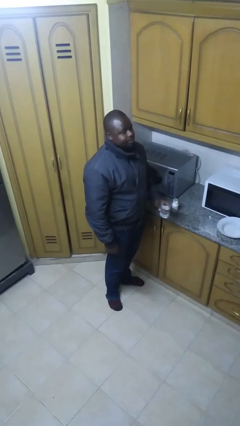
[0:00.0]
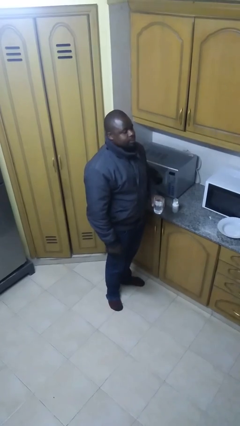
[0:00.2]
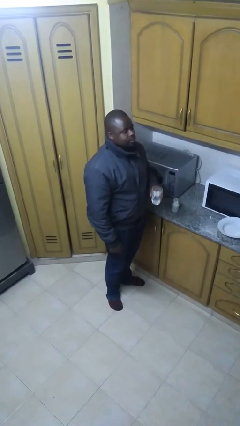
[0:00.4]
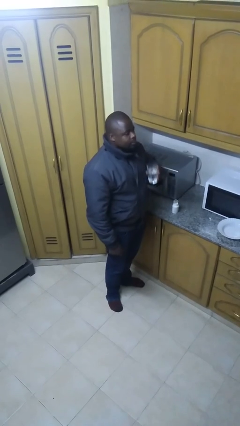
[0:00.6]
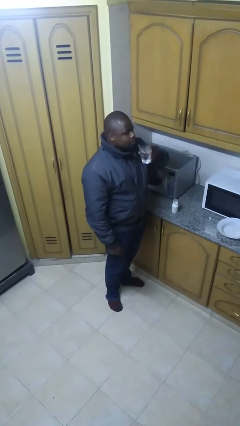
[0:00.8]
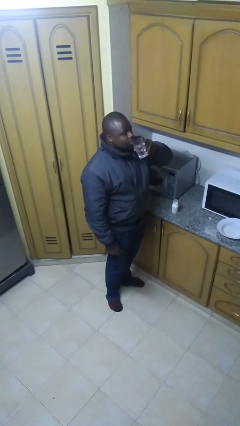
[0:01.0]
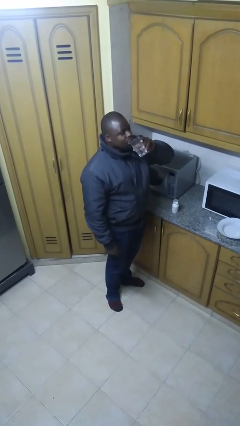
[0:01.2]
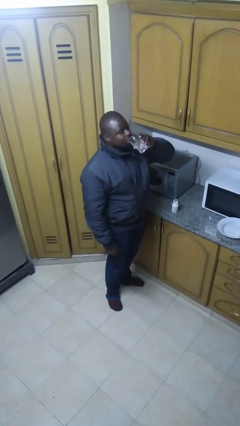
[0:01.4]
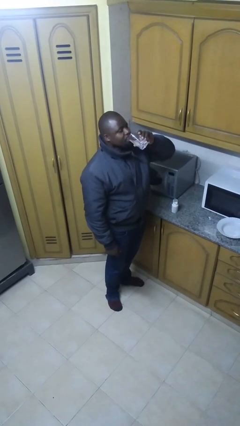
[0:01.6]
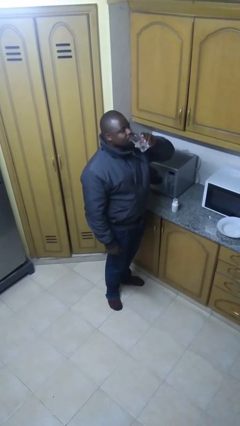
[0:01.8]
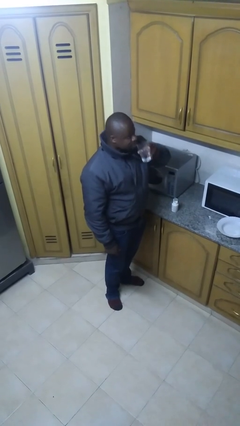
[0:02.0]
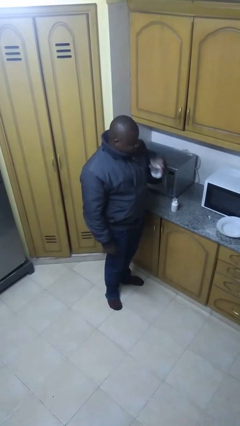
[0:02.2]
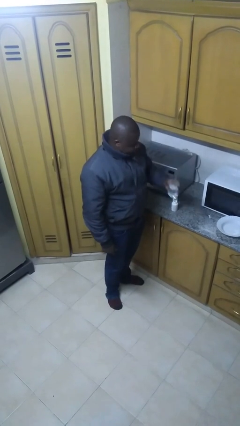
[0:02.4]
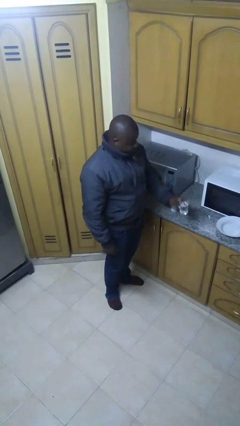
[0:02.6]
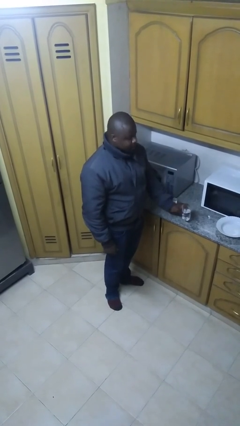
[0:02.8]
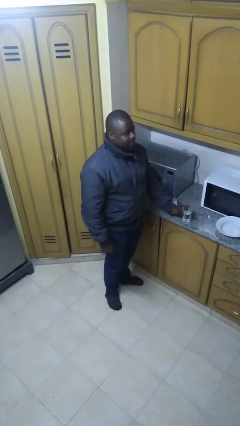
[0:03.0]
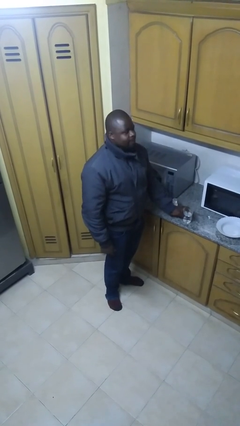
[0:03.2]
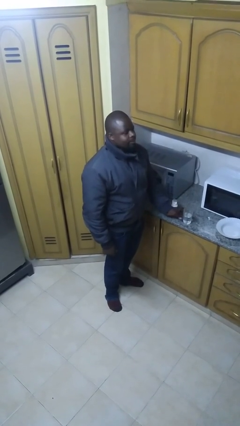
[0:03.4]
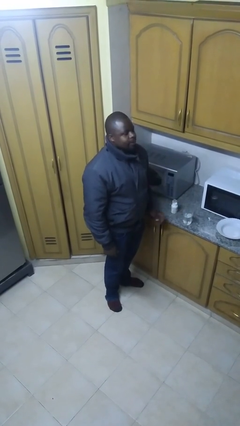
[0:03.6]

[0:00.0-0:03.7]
person drinks from cup

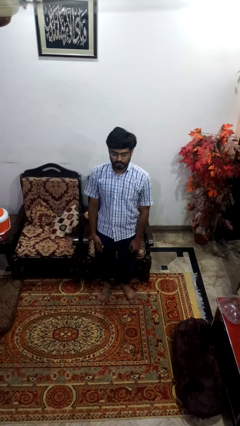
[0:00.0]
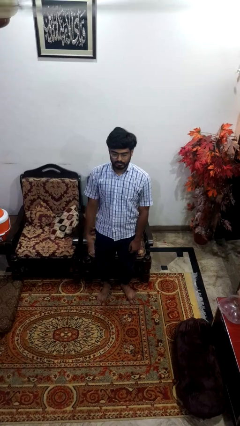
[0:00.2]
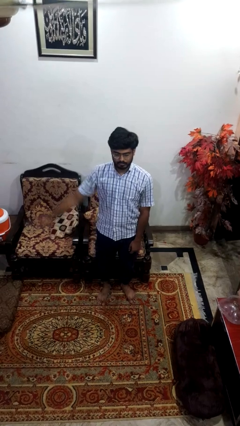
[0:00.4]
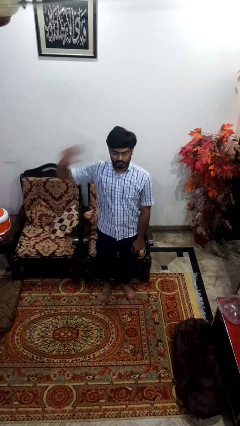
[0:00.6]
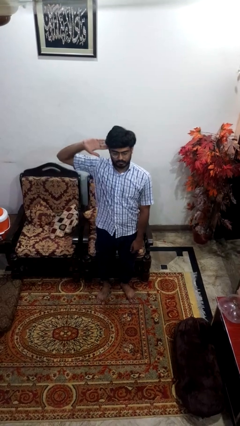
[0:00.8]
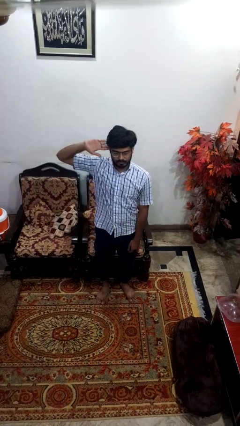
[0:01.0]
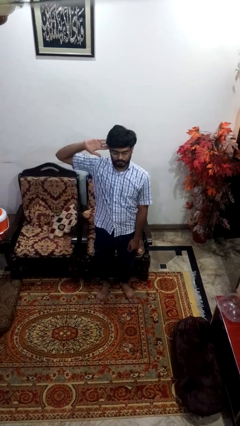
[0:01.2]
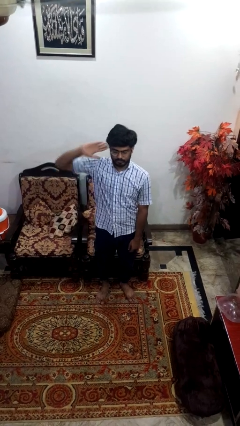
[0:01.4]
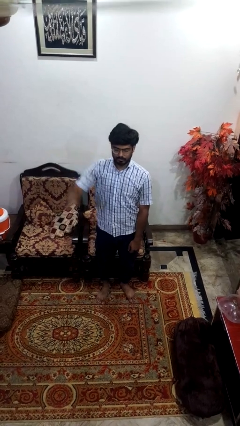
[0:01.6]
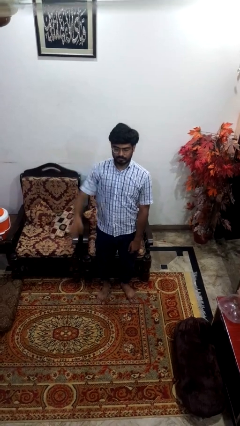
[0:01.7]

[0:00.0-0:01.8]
person salutes

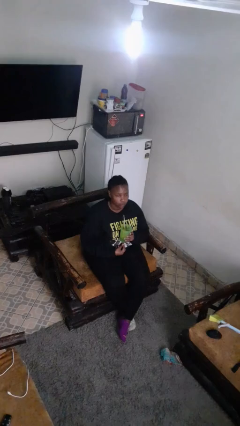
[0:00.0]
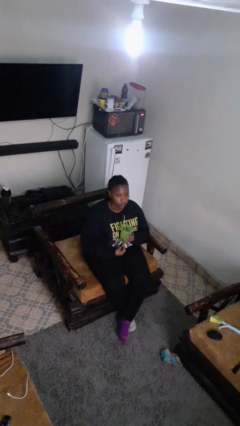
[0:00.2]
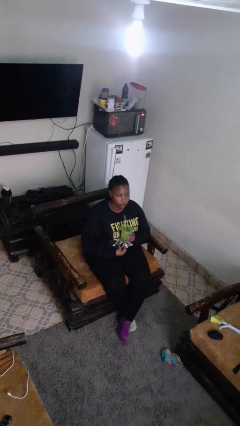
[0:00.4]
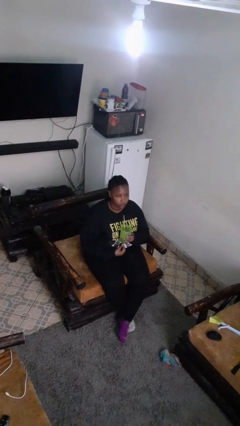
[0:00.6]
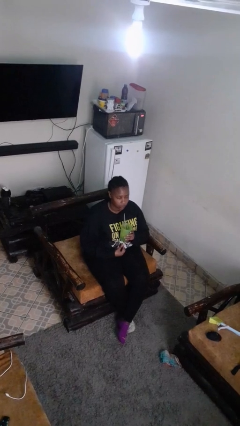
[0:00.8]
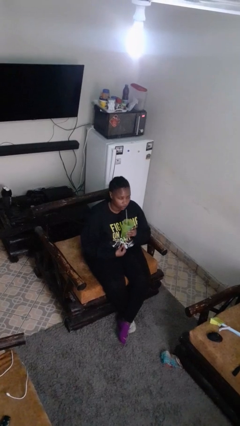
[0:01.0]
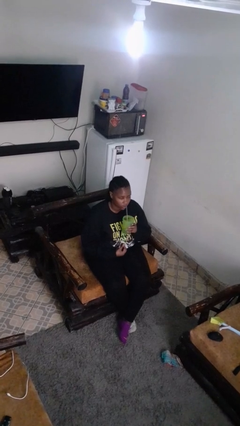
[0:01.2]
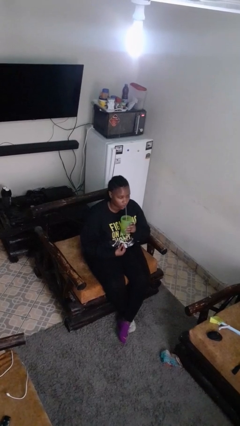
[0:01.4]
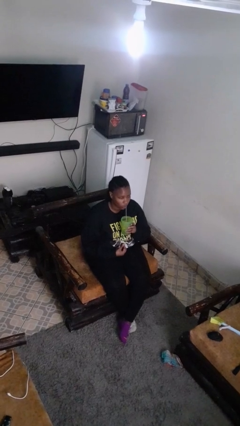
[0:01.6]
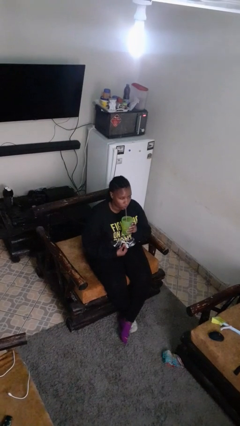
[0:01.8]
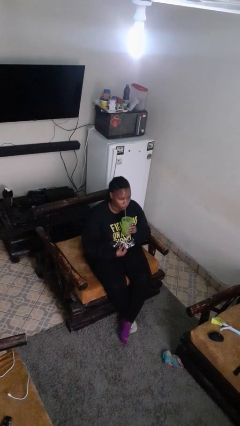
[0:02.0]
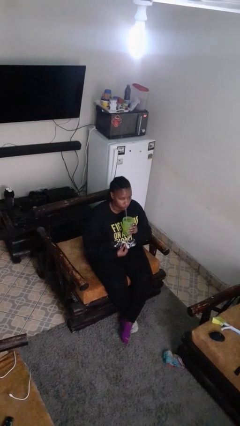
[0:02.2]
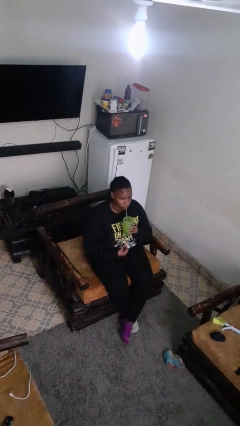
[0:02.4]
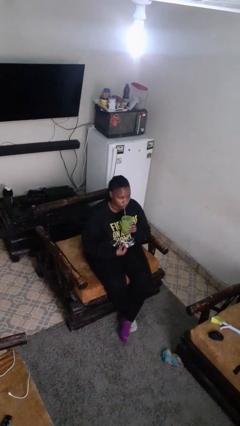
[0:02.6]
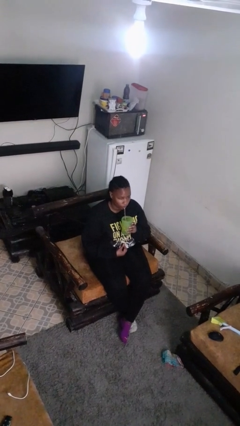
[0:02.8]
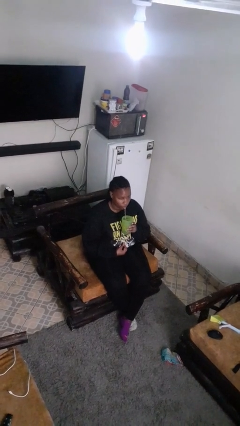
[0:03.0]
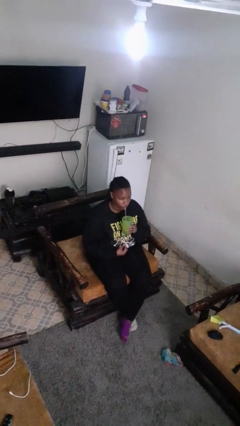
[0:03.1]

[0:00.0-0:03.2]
person drinks from straw

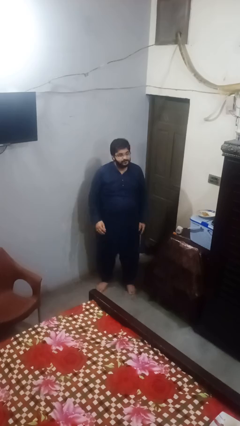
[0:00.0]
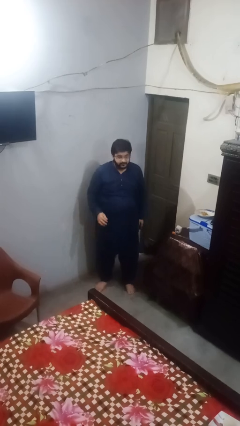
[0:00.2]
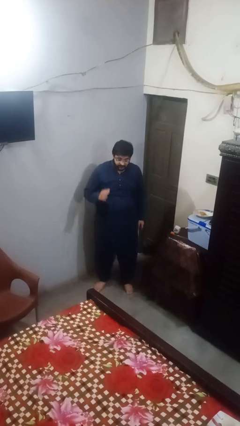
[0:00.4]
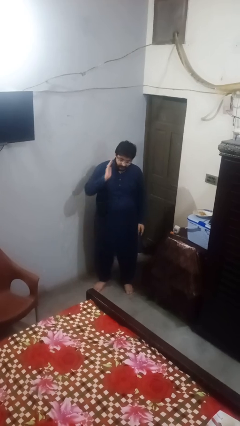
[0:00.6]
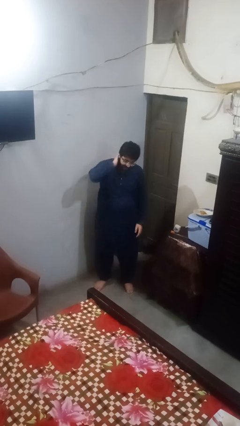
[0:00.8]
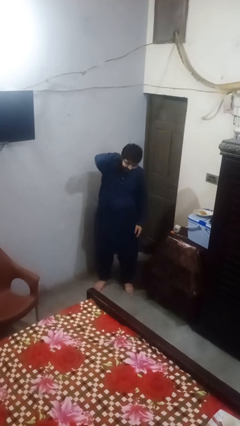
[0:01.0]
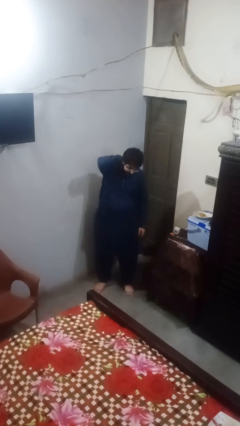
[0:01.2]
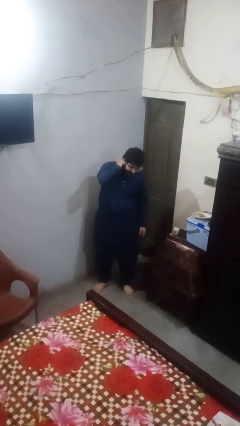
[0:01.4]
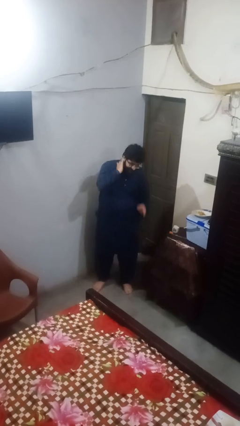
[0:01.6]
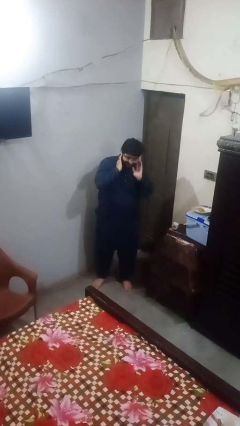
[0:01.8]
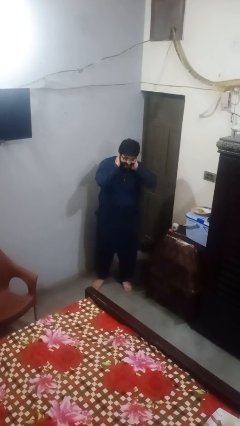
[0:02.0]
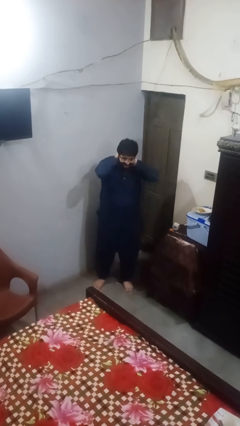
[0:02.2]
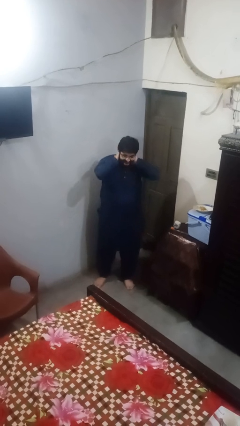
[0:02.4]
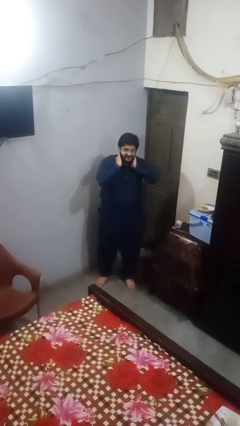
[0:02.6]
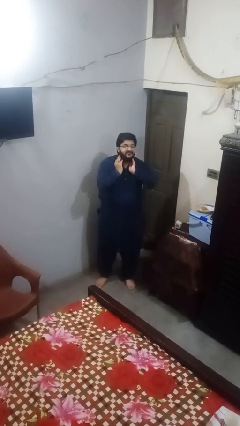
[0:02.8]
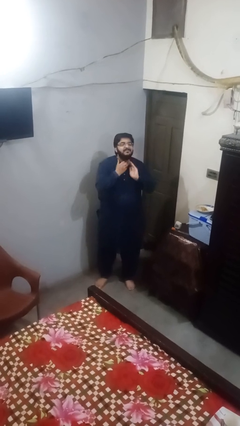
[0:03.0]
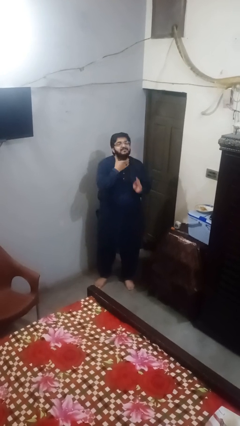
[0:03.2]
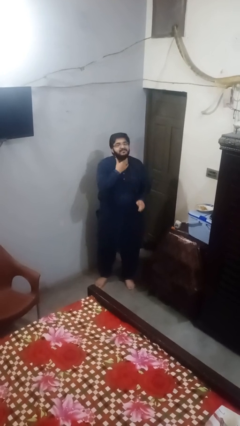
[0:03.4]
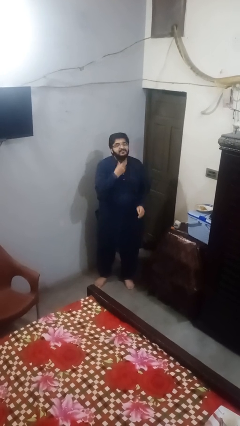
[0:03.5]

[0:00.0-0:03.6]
person rubs neck

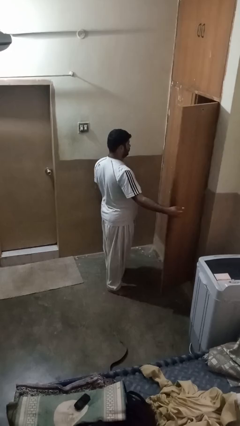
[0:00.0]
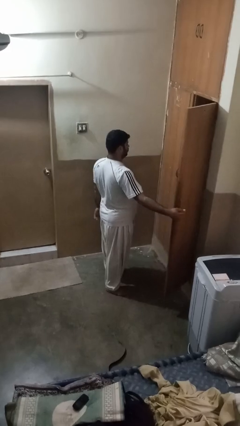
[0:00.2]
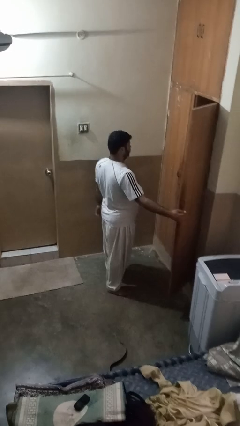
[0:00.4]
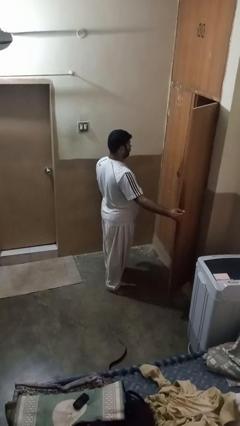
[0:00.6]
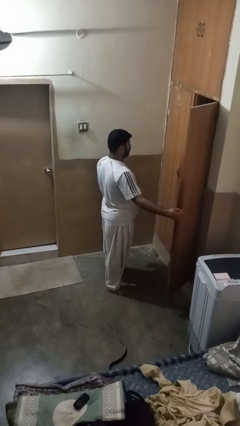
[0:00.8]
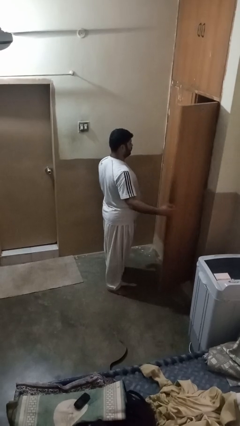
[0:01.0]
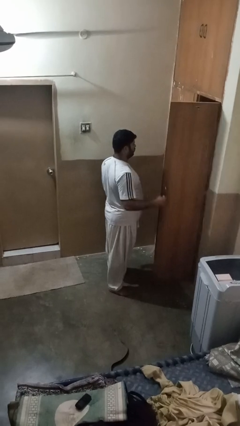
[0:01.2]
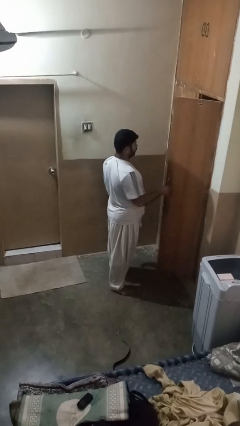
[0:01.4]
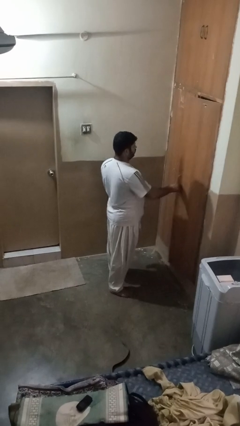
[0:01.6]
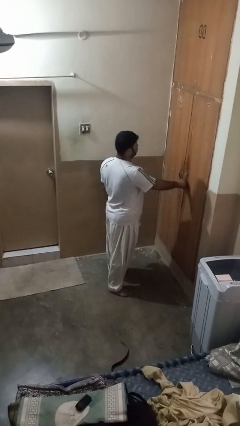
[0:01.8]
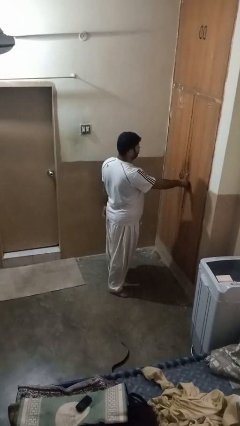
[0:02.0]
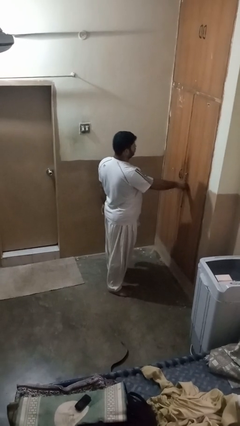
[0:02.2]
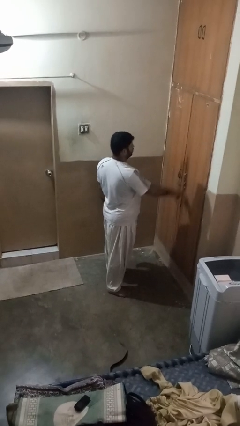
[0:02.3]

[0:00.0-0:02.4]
person closes closet door

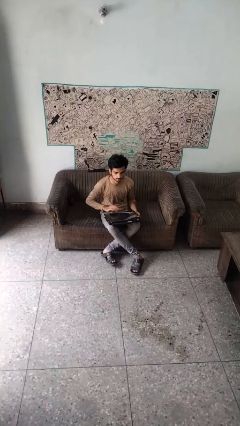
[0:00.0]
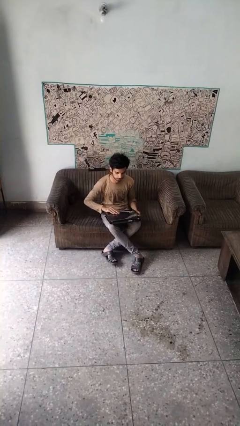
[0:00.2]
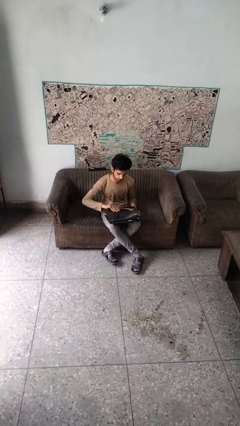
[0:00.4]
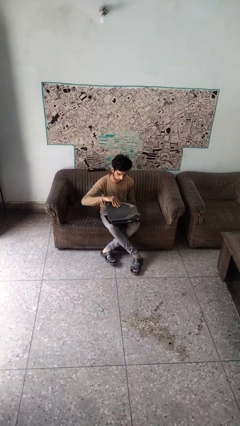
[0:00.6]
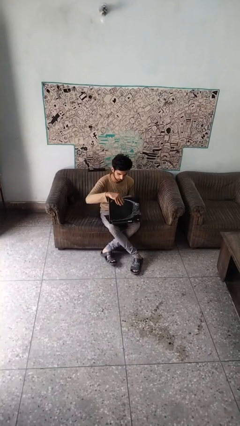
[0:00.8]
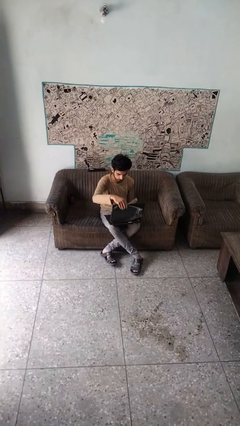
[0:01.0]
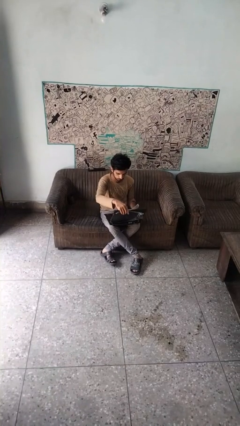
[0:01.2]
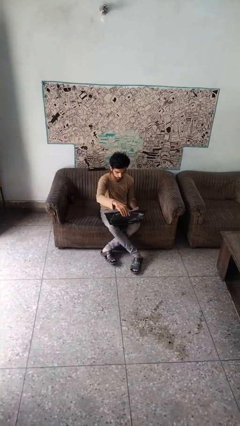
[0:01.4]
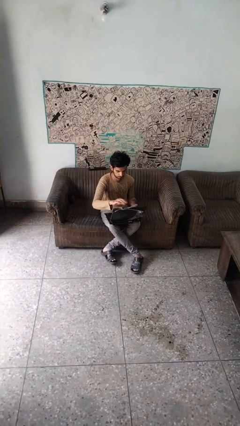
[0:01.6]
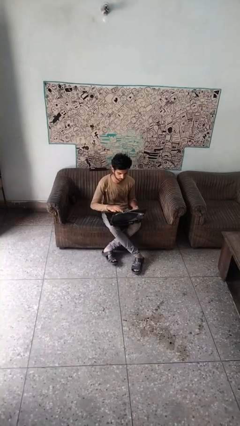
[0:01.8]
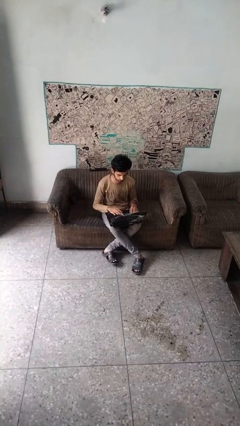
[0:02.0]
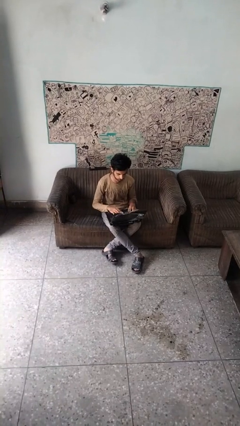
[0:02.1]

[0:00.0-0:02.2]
person opens laptop

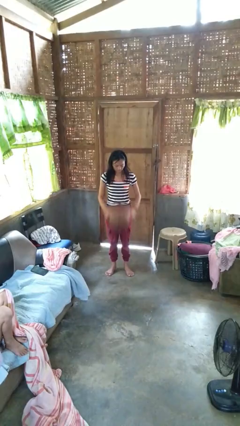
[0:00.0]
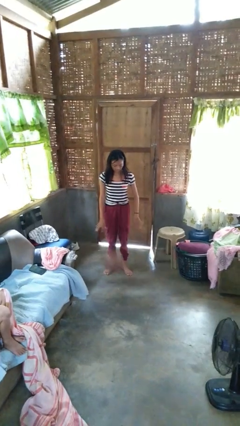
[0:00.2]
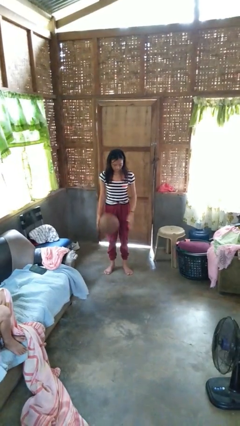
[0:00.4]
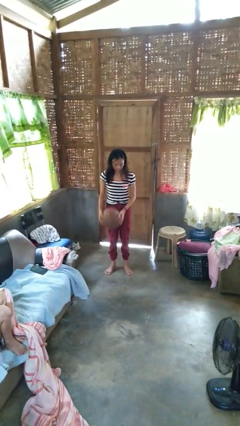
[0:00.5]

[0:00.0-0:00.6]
person bounces ball on floor
